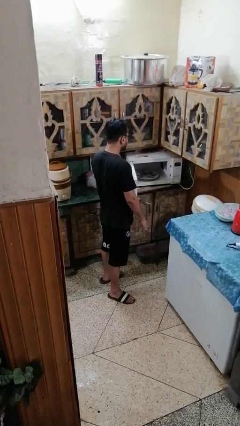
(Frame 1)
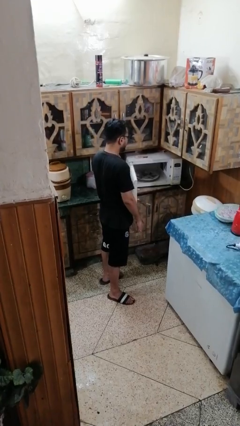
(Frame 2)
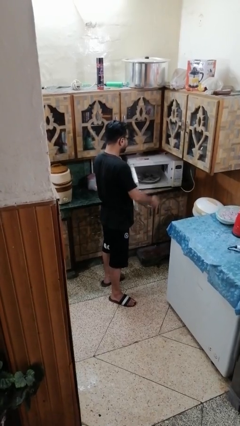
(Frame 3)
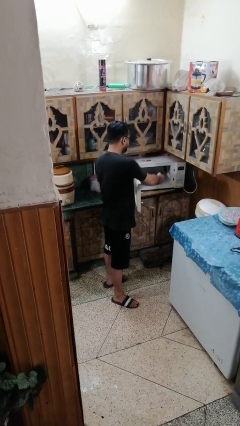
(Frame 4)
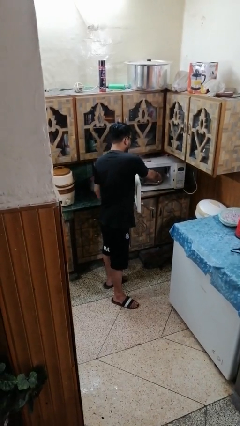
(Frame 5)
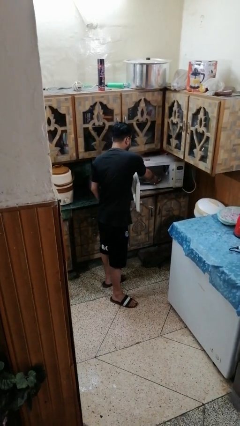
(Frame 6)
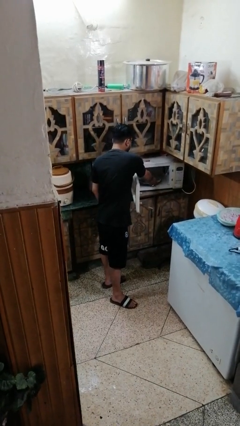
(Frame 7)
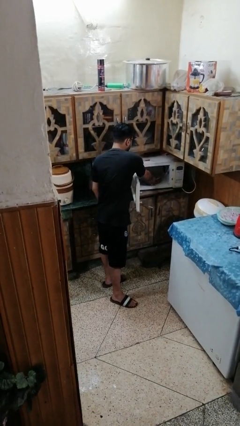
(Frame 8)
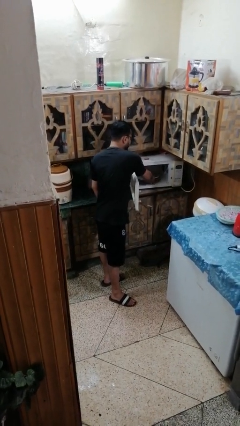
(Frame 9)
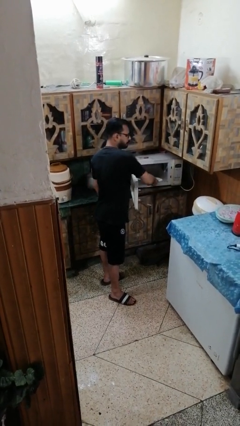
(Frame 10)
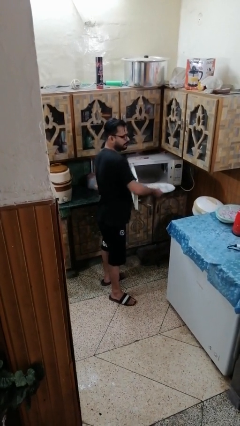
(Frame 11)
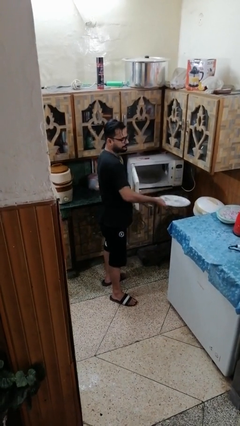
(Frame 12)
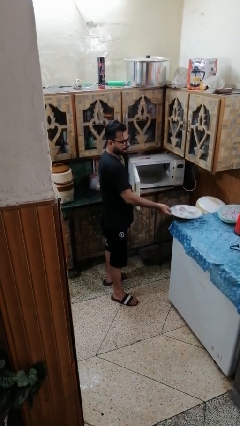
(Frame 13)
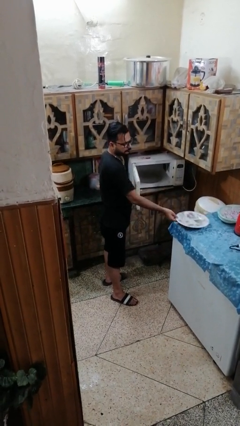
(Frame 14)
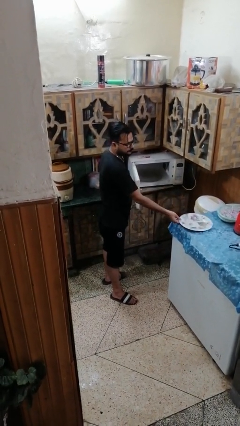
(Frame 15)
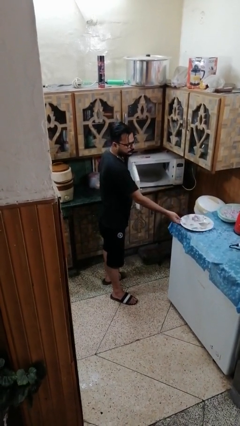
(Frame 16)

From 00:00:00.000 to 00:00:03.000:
person takes object from microwave

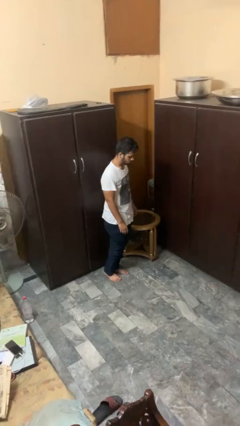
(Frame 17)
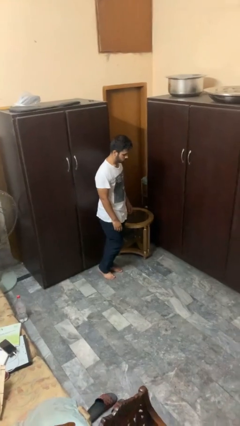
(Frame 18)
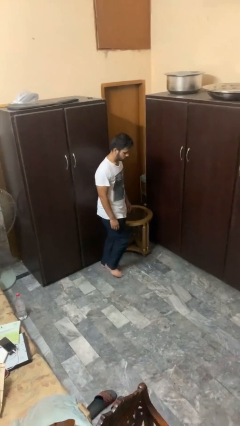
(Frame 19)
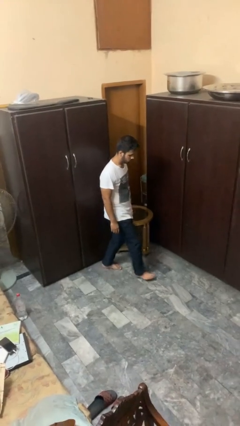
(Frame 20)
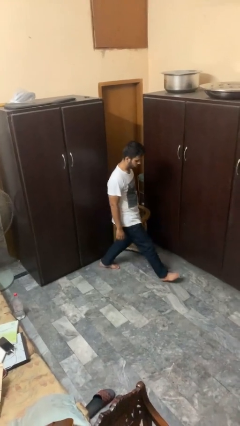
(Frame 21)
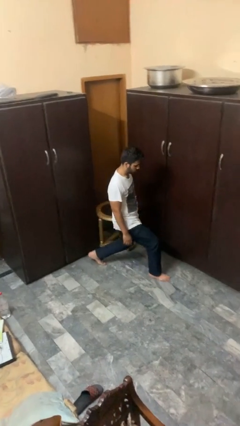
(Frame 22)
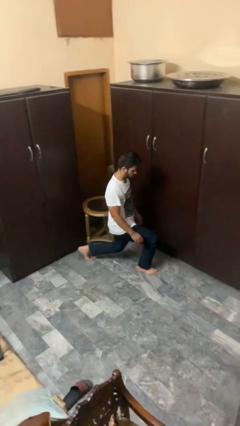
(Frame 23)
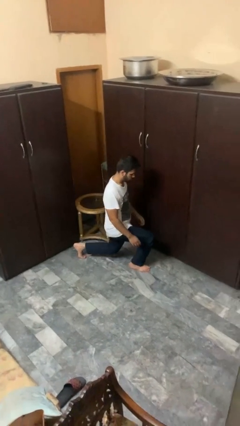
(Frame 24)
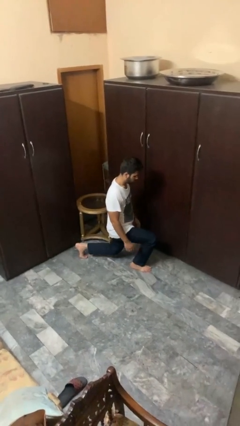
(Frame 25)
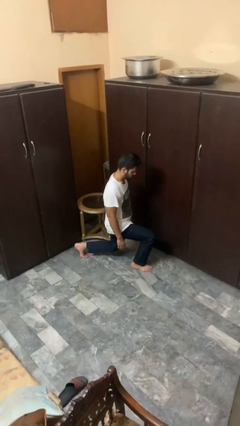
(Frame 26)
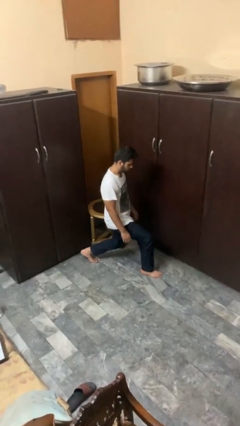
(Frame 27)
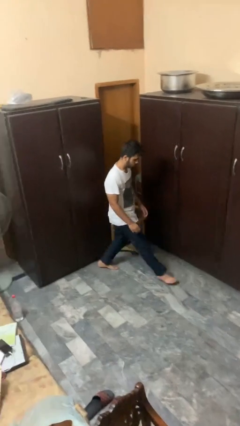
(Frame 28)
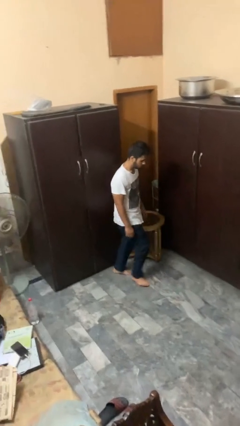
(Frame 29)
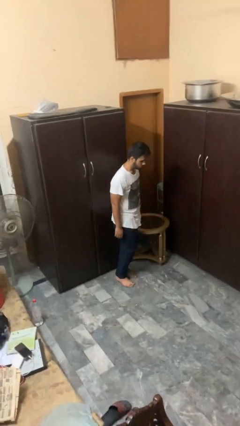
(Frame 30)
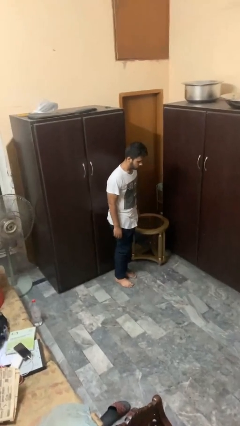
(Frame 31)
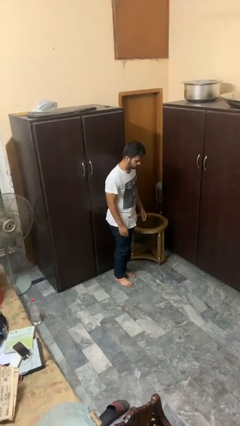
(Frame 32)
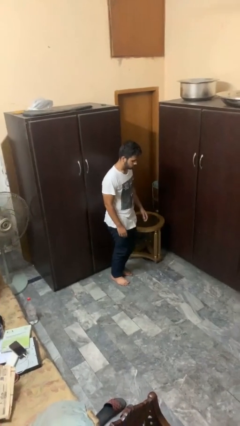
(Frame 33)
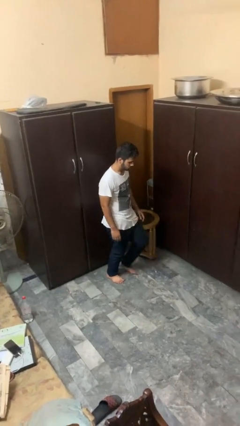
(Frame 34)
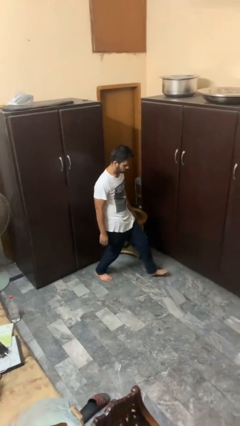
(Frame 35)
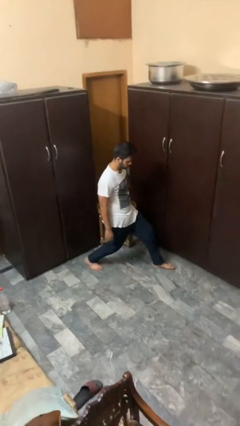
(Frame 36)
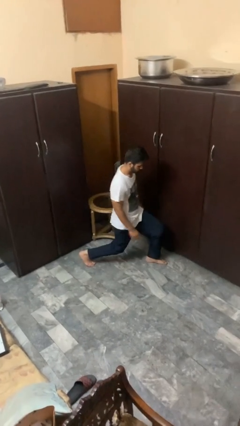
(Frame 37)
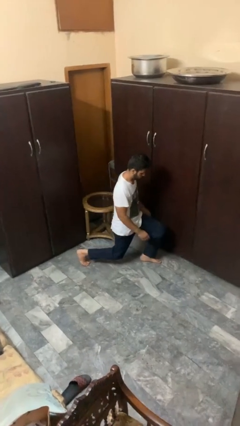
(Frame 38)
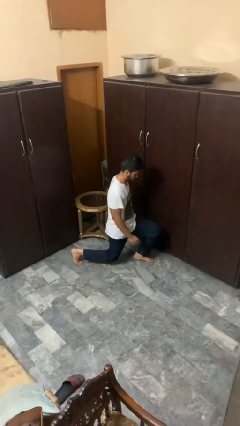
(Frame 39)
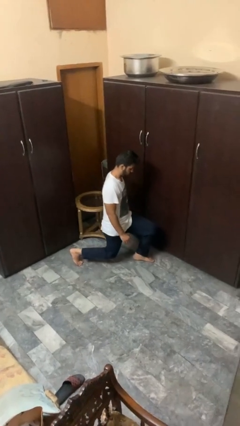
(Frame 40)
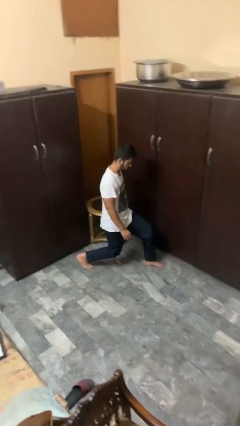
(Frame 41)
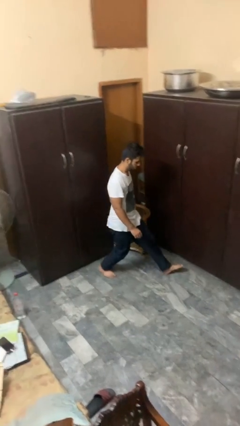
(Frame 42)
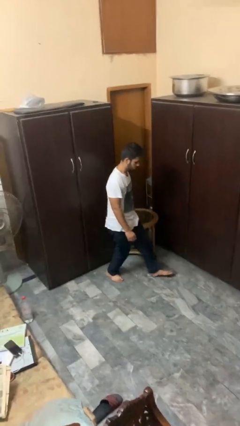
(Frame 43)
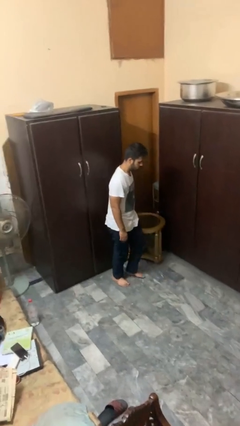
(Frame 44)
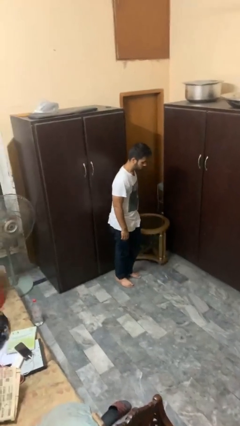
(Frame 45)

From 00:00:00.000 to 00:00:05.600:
person exercises with lunges

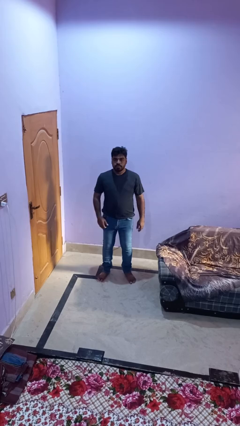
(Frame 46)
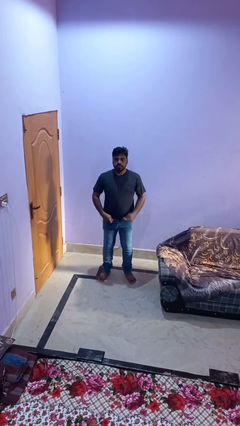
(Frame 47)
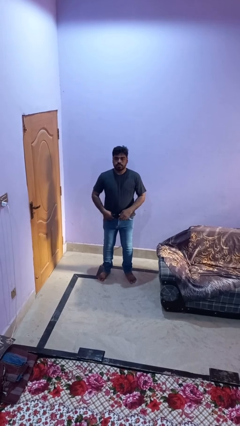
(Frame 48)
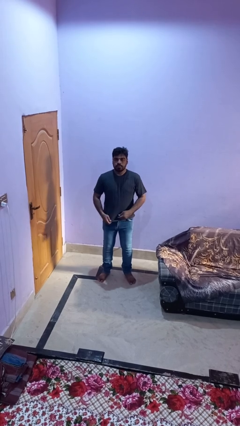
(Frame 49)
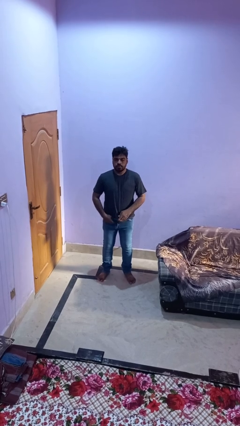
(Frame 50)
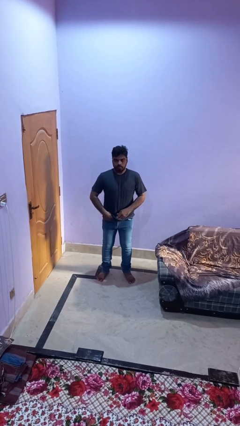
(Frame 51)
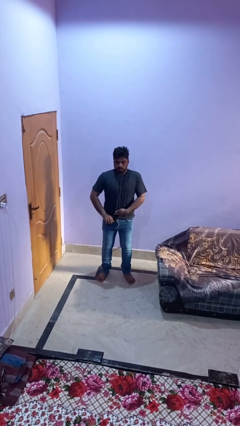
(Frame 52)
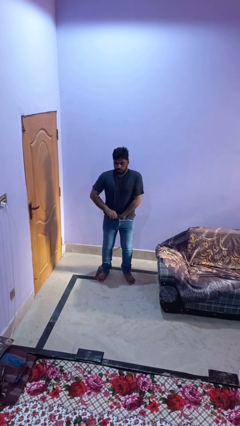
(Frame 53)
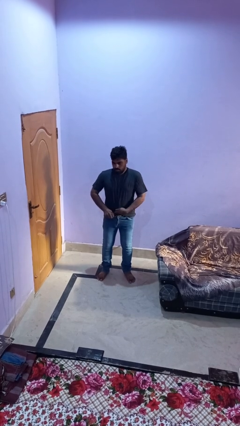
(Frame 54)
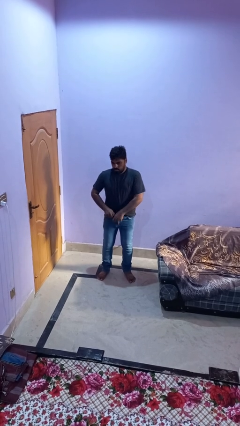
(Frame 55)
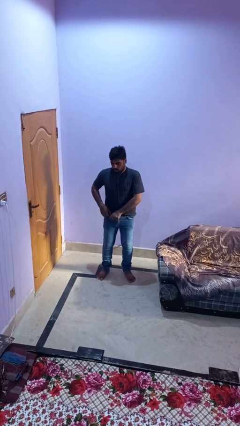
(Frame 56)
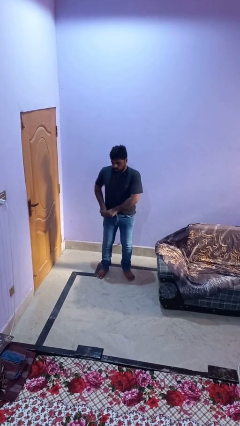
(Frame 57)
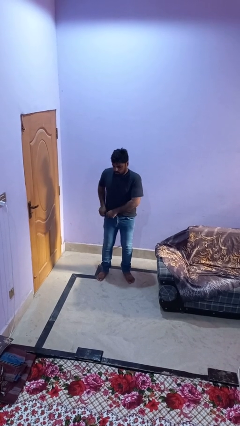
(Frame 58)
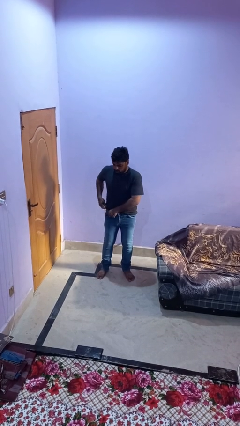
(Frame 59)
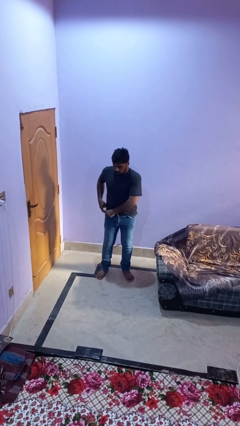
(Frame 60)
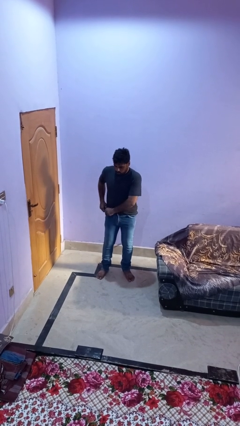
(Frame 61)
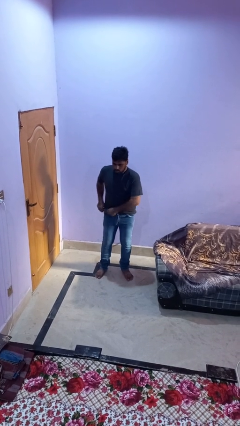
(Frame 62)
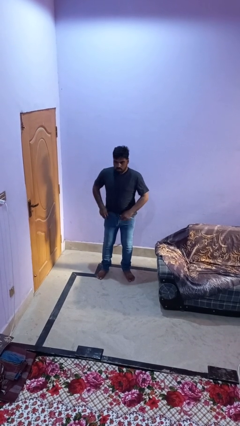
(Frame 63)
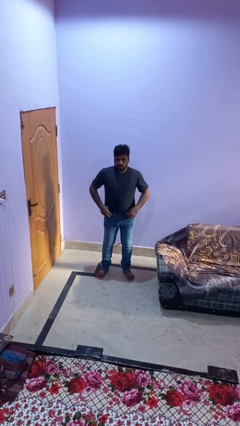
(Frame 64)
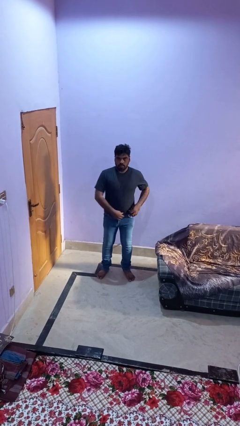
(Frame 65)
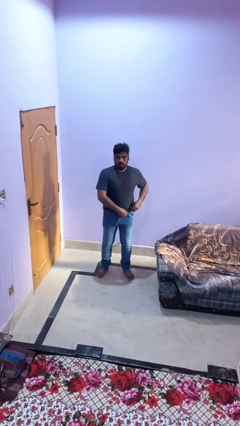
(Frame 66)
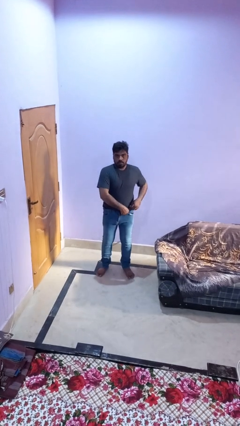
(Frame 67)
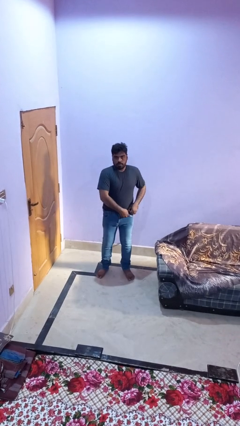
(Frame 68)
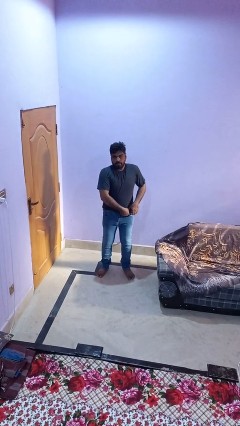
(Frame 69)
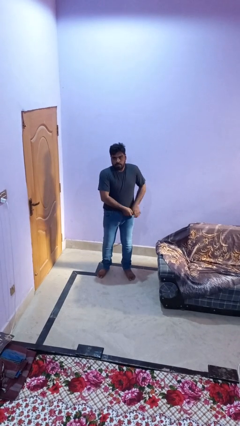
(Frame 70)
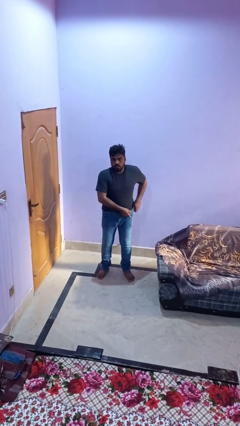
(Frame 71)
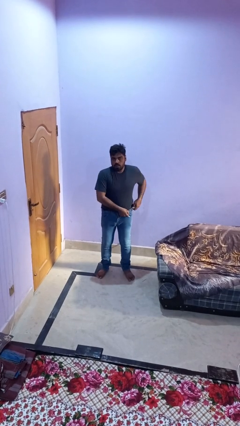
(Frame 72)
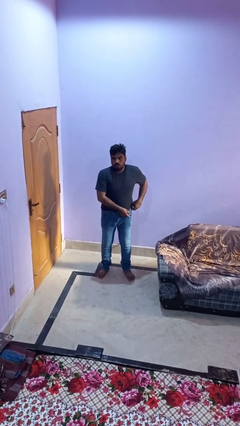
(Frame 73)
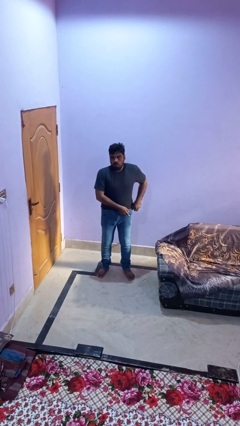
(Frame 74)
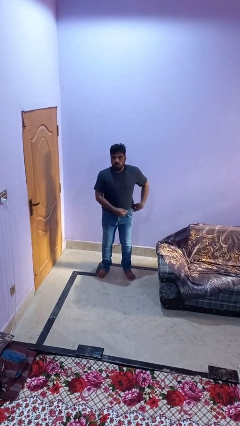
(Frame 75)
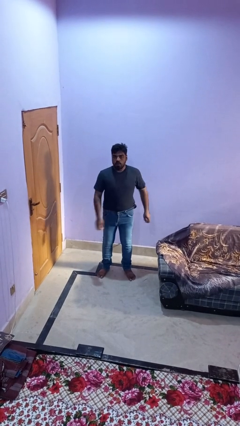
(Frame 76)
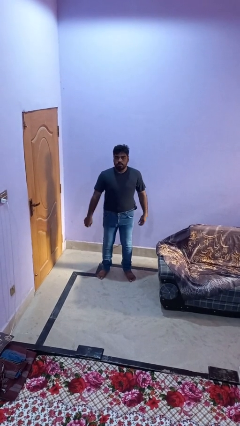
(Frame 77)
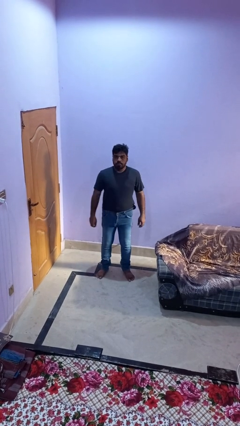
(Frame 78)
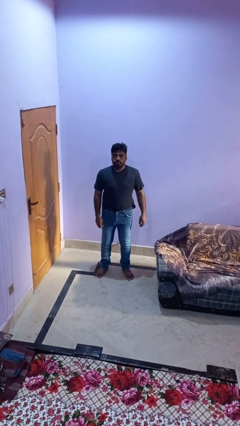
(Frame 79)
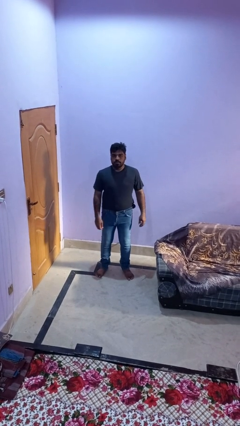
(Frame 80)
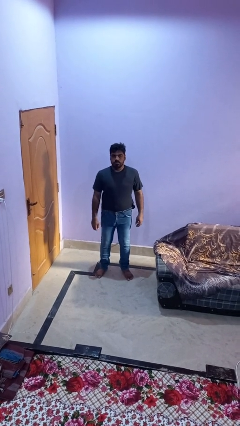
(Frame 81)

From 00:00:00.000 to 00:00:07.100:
person tucks in shirt

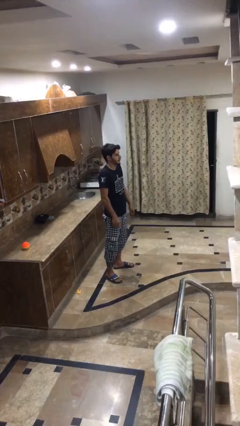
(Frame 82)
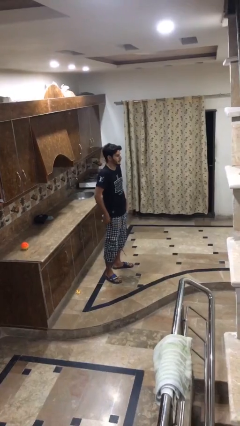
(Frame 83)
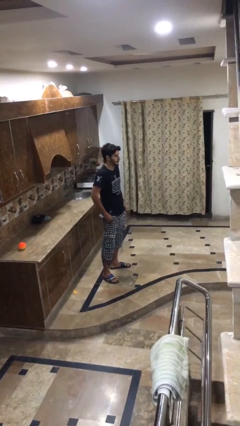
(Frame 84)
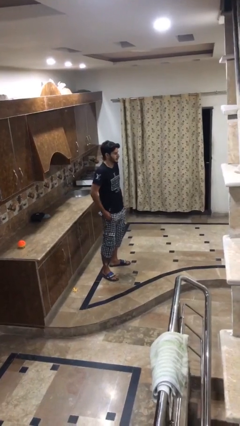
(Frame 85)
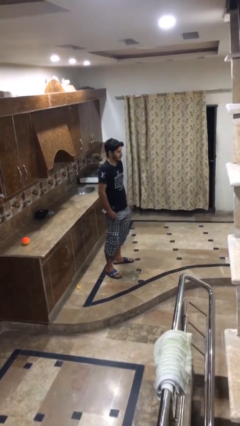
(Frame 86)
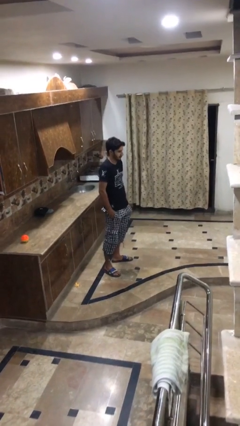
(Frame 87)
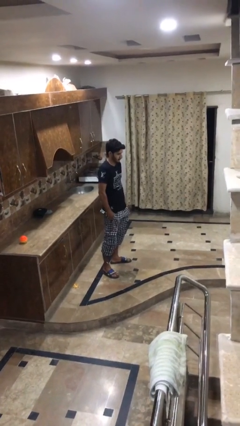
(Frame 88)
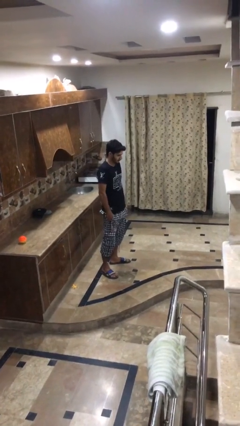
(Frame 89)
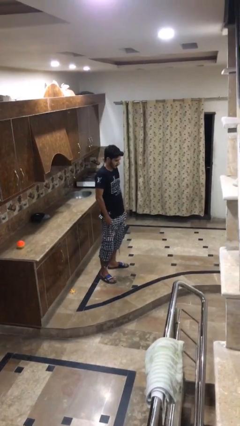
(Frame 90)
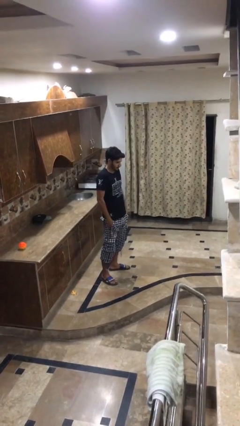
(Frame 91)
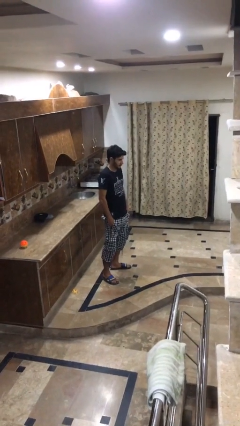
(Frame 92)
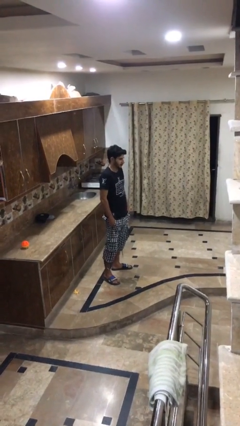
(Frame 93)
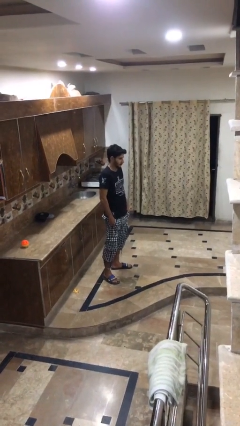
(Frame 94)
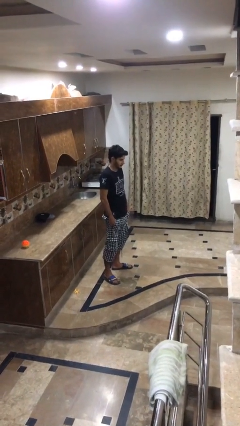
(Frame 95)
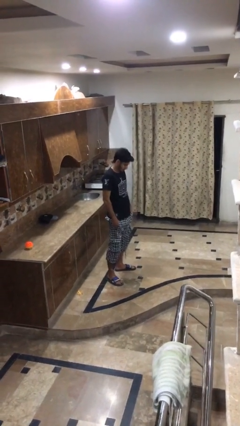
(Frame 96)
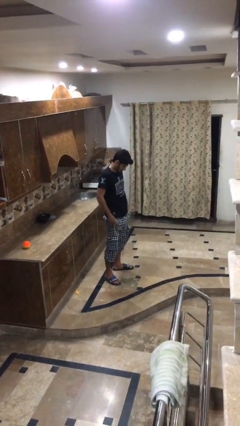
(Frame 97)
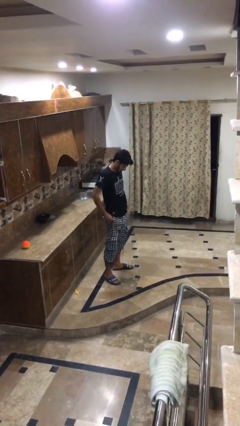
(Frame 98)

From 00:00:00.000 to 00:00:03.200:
person puts hands in back pockets
